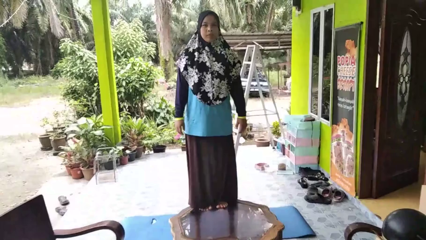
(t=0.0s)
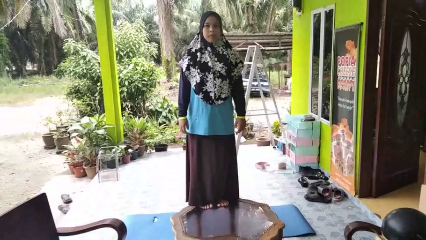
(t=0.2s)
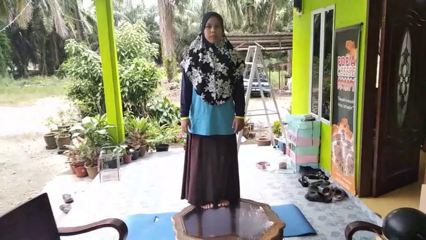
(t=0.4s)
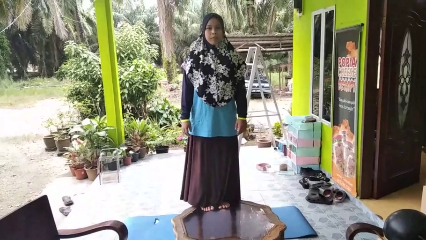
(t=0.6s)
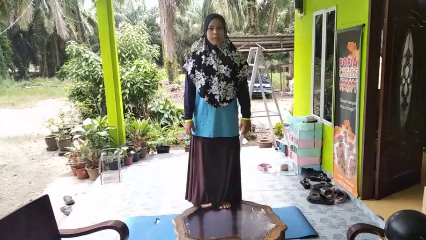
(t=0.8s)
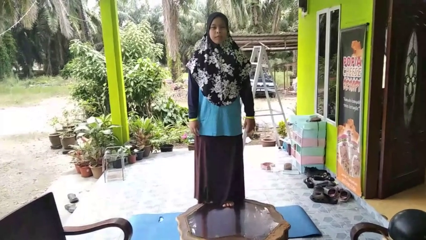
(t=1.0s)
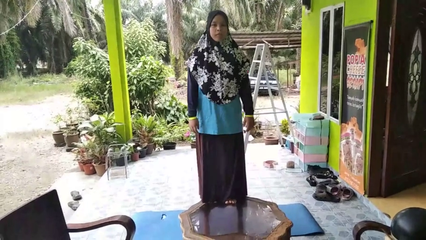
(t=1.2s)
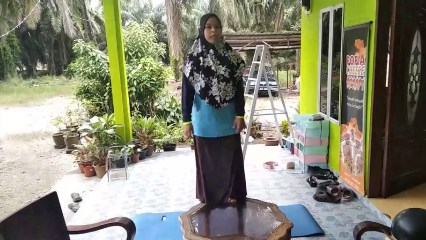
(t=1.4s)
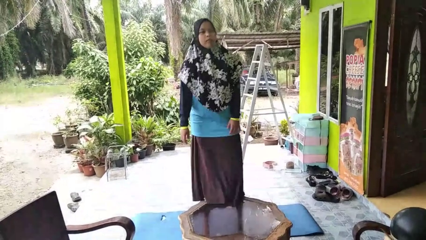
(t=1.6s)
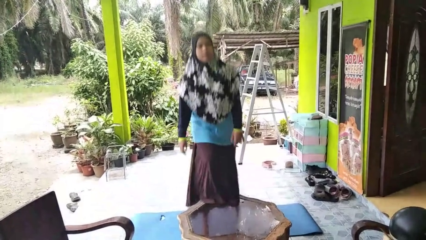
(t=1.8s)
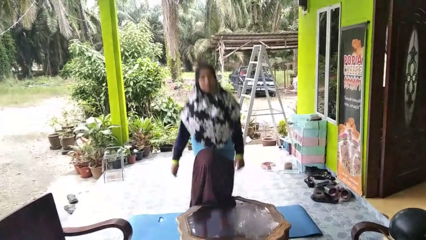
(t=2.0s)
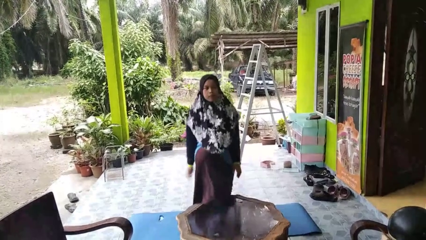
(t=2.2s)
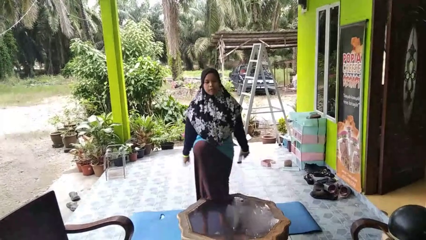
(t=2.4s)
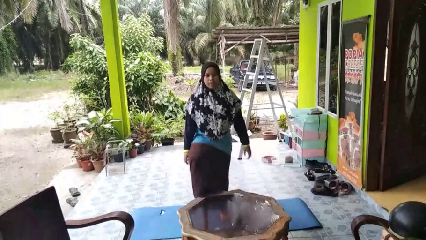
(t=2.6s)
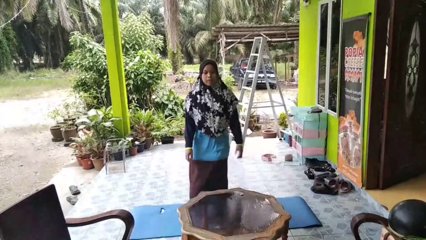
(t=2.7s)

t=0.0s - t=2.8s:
person climbs off table

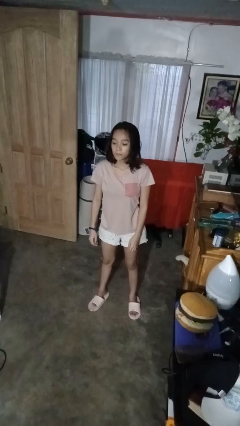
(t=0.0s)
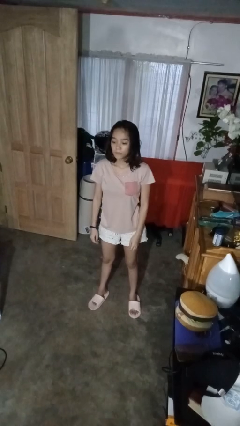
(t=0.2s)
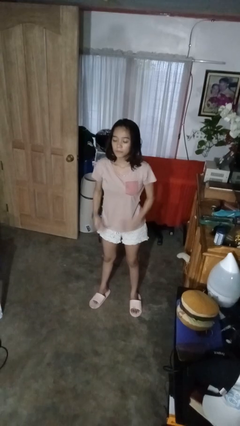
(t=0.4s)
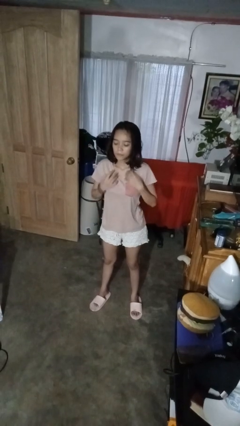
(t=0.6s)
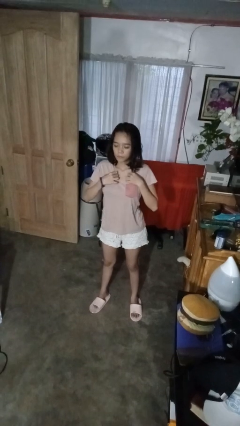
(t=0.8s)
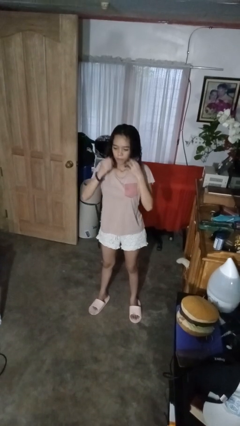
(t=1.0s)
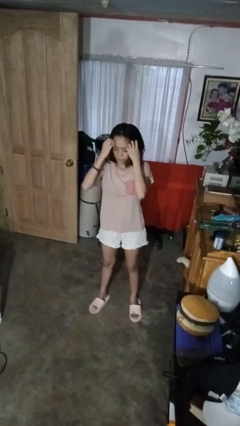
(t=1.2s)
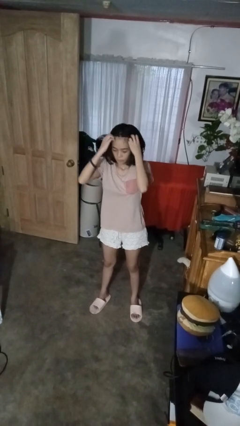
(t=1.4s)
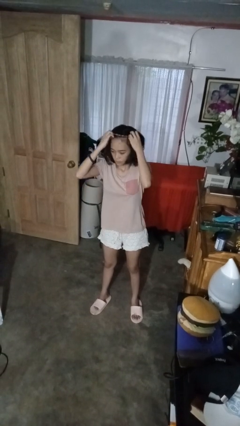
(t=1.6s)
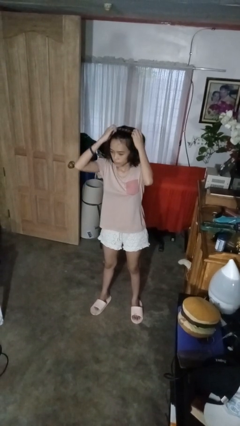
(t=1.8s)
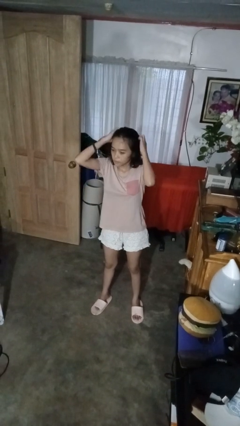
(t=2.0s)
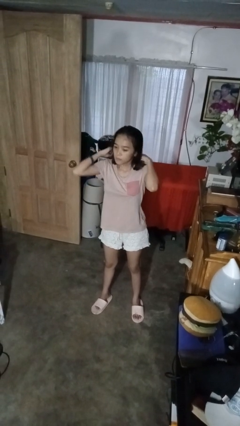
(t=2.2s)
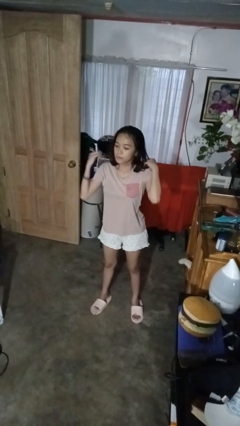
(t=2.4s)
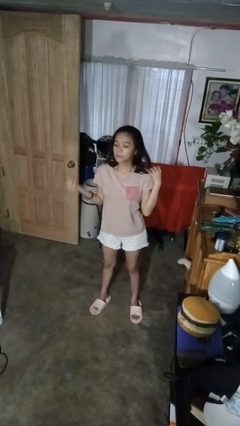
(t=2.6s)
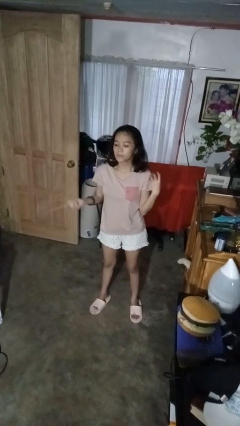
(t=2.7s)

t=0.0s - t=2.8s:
person takes off necklace

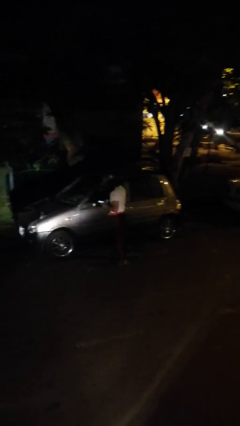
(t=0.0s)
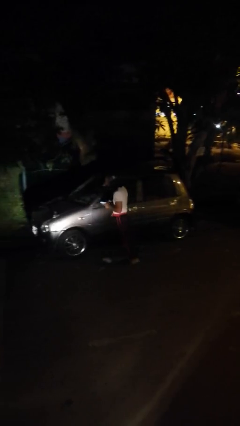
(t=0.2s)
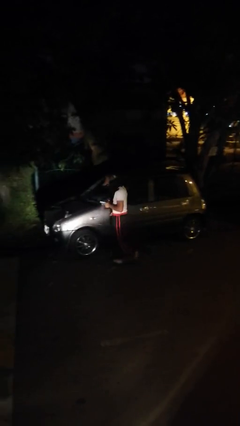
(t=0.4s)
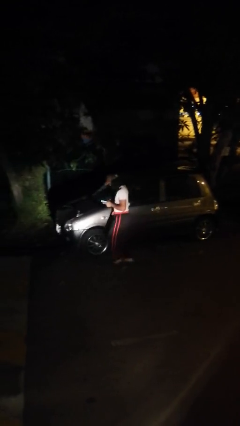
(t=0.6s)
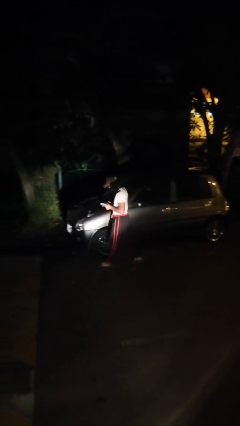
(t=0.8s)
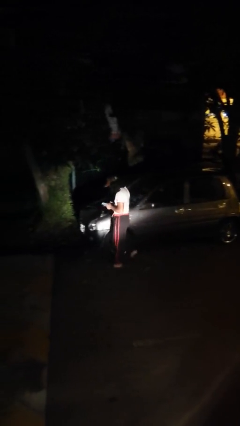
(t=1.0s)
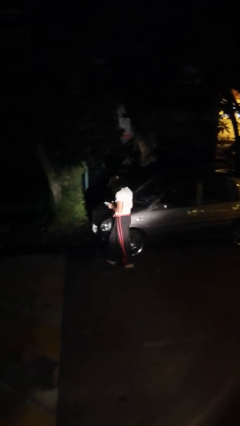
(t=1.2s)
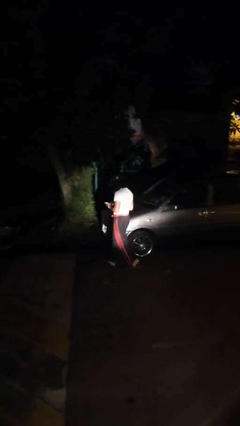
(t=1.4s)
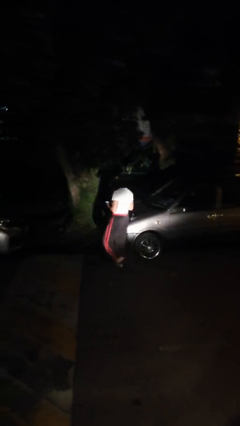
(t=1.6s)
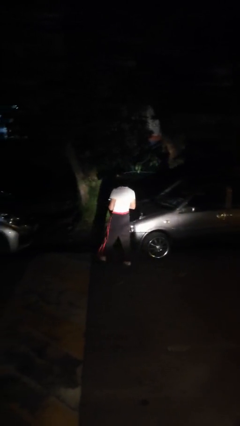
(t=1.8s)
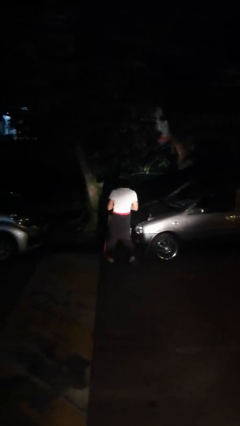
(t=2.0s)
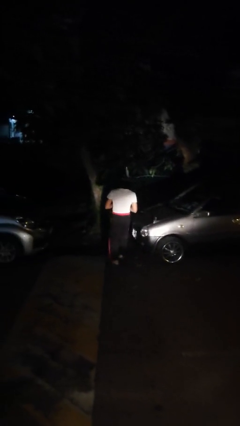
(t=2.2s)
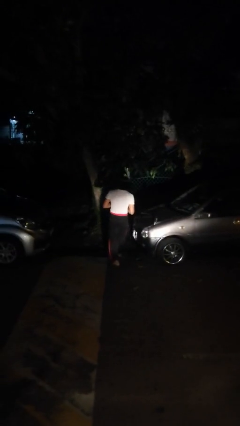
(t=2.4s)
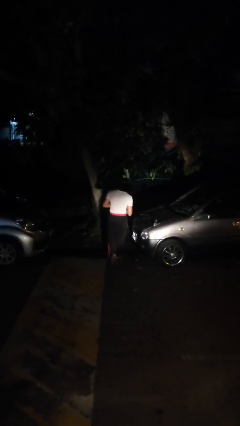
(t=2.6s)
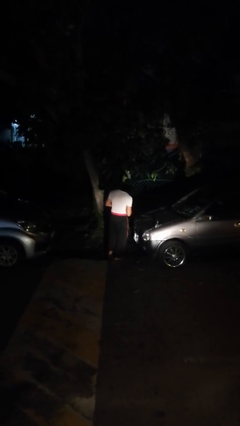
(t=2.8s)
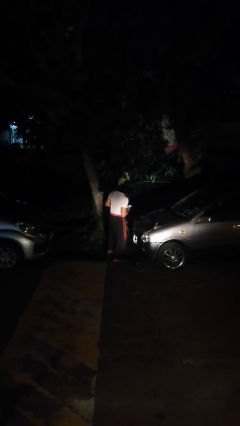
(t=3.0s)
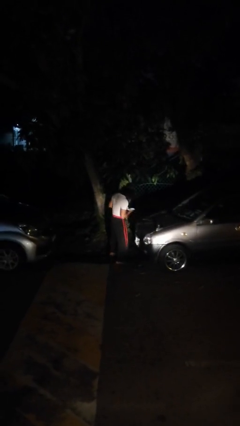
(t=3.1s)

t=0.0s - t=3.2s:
person walks around car

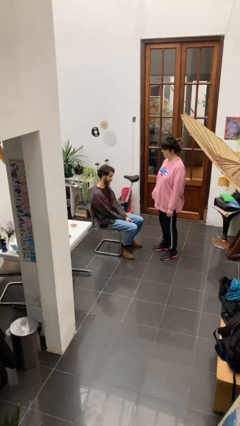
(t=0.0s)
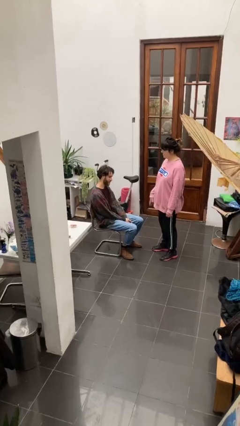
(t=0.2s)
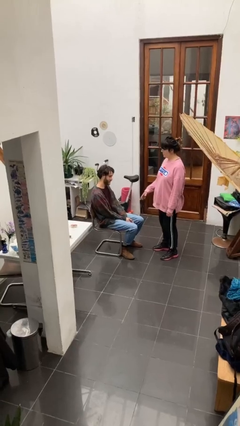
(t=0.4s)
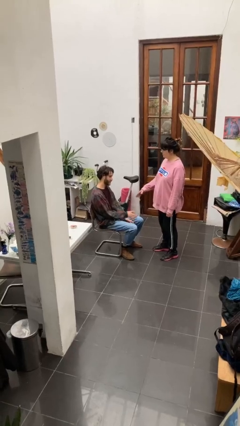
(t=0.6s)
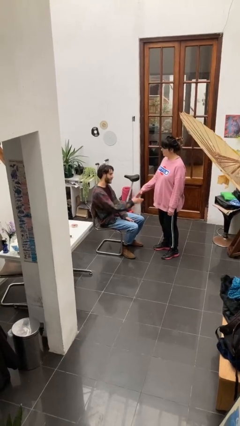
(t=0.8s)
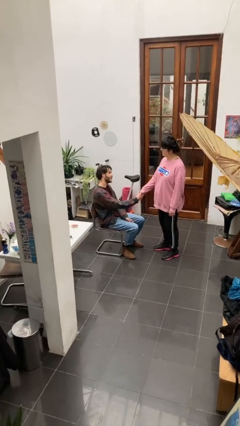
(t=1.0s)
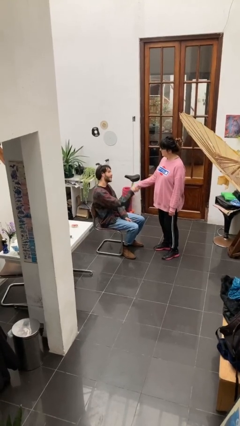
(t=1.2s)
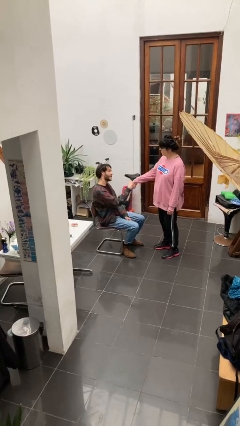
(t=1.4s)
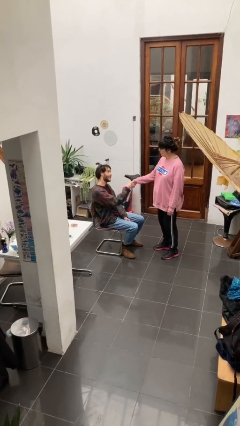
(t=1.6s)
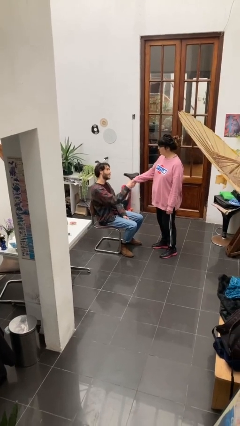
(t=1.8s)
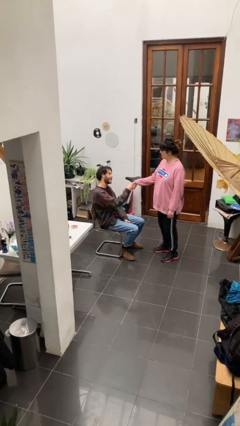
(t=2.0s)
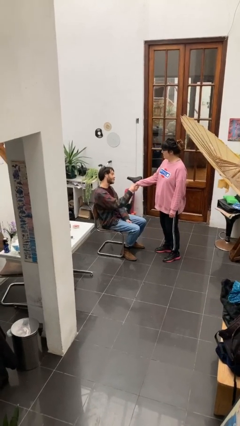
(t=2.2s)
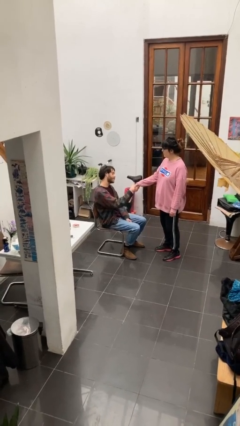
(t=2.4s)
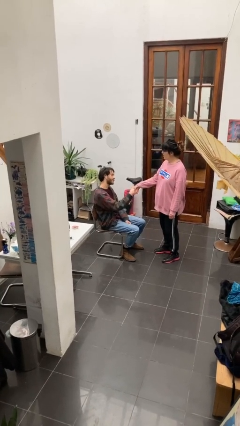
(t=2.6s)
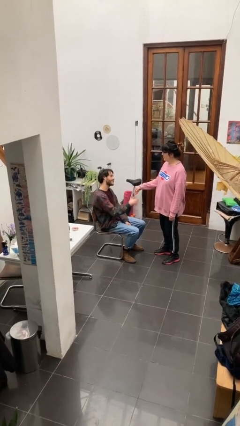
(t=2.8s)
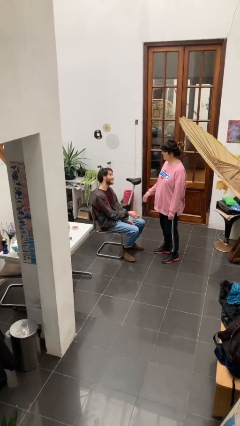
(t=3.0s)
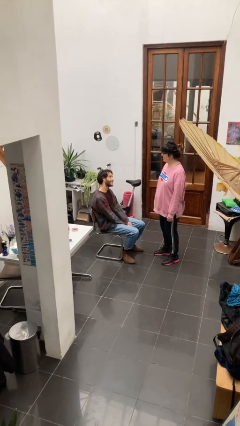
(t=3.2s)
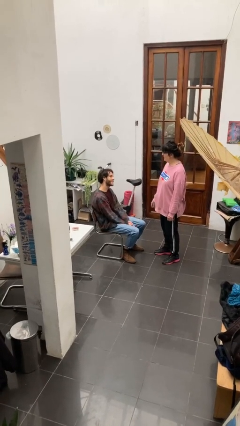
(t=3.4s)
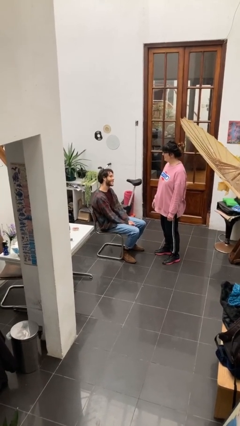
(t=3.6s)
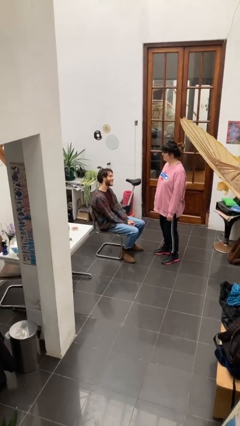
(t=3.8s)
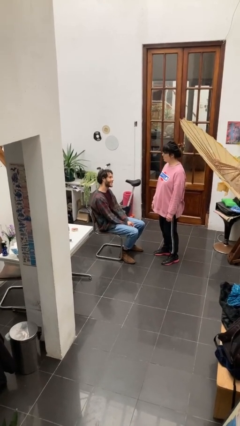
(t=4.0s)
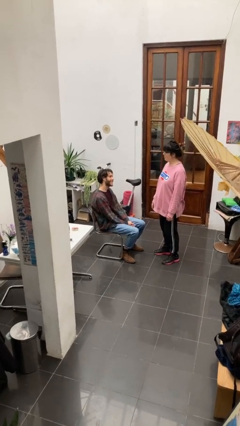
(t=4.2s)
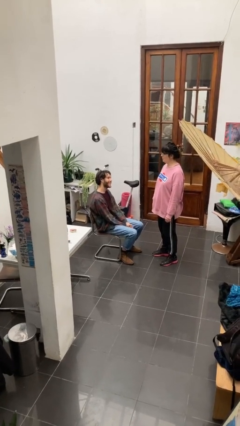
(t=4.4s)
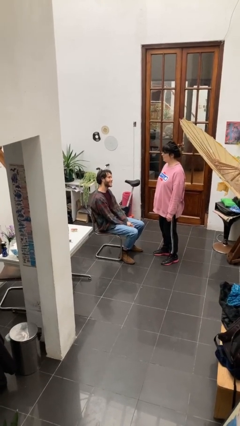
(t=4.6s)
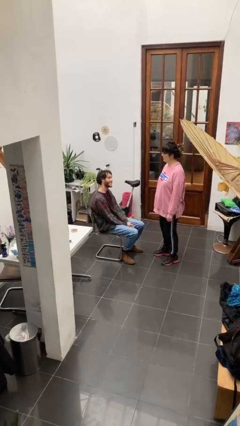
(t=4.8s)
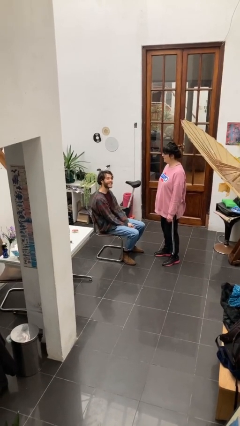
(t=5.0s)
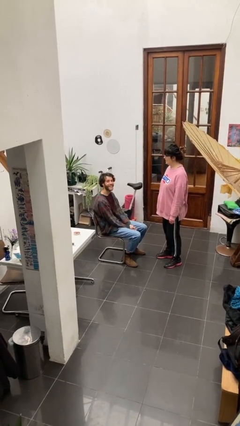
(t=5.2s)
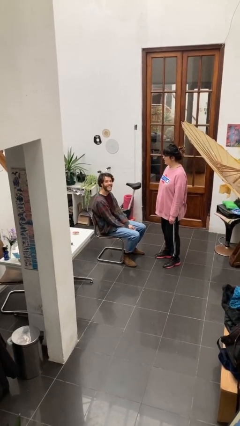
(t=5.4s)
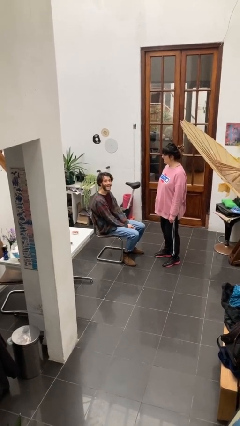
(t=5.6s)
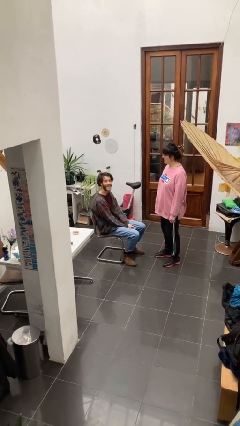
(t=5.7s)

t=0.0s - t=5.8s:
person shakes hand

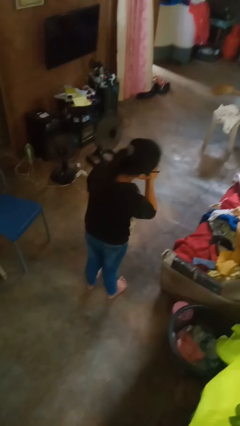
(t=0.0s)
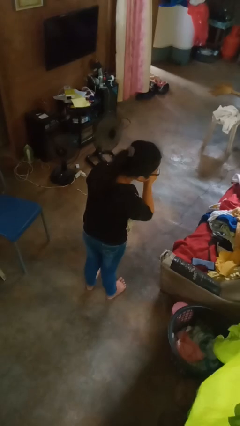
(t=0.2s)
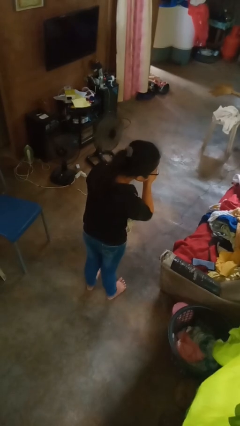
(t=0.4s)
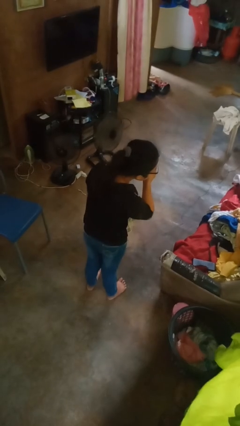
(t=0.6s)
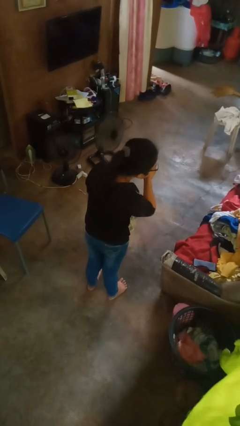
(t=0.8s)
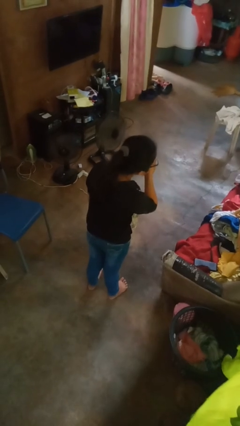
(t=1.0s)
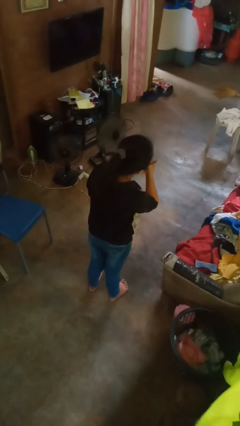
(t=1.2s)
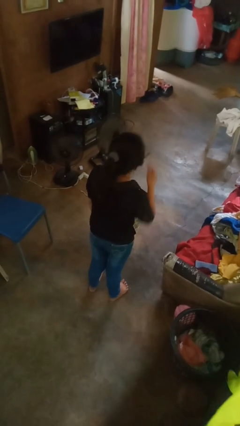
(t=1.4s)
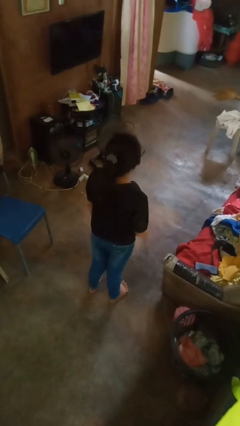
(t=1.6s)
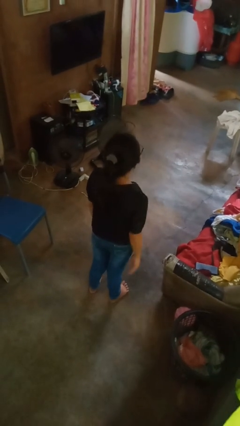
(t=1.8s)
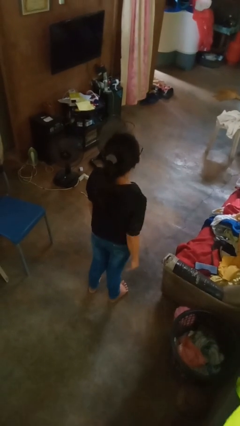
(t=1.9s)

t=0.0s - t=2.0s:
person sneezes into hand

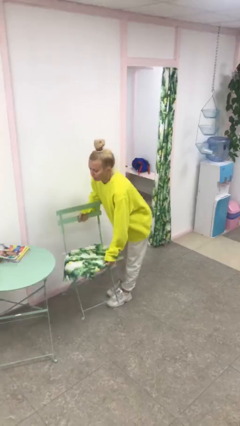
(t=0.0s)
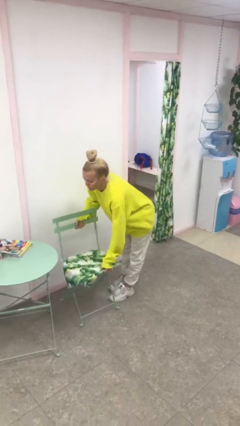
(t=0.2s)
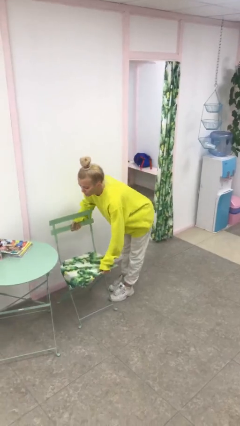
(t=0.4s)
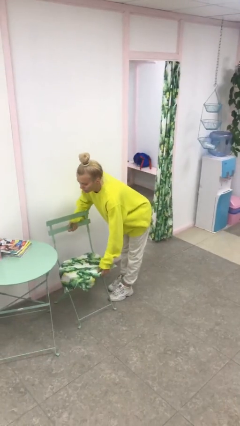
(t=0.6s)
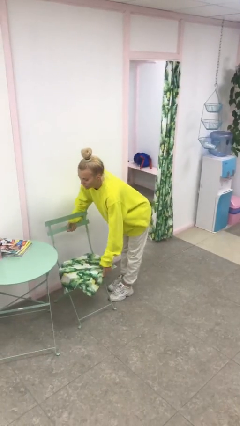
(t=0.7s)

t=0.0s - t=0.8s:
person puts down object on floor
